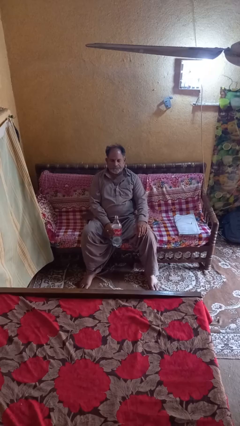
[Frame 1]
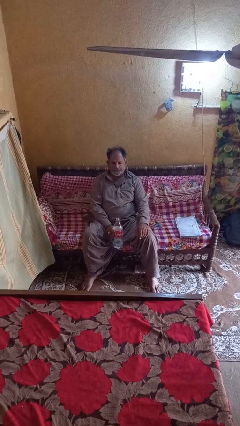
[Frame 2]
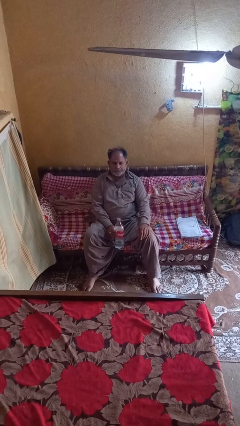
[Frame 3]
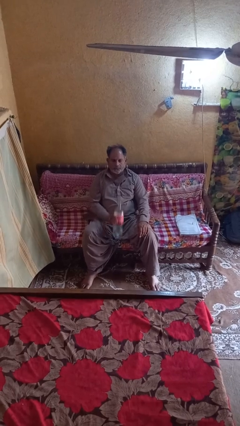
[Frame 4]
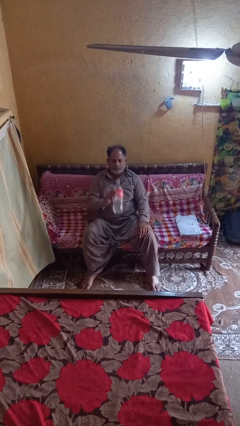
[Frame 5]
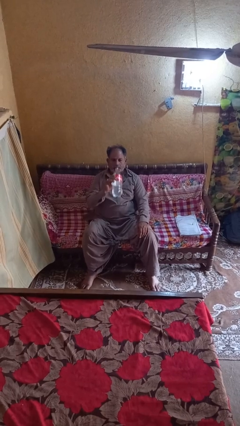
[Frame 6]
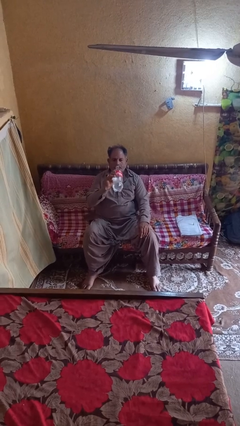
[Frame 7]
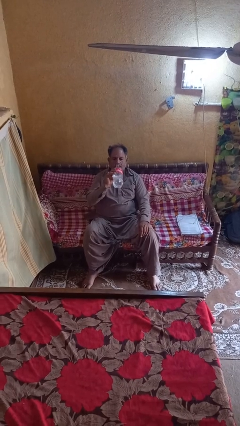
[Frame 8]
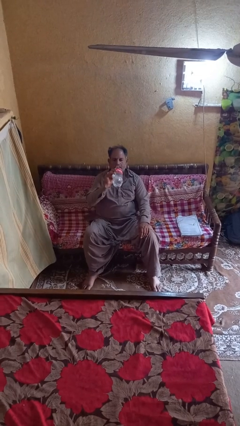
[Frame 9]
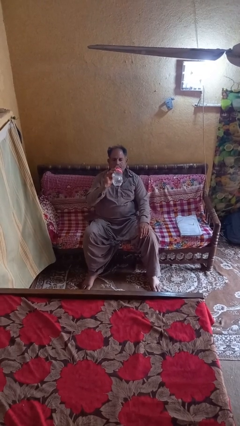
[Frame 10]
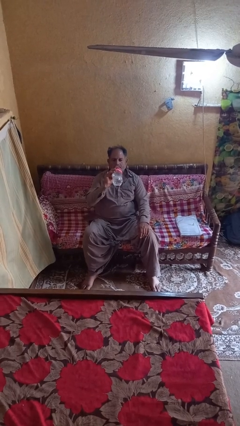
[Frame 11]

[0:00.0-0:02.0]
person drinks from bottle

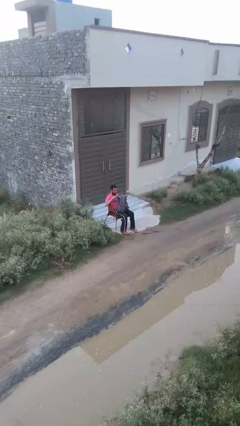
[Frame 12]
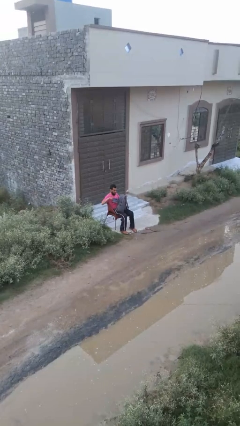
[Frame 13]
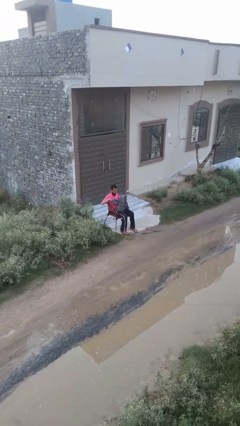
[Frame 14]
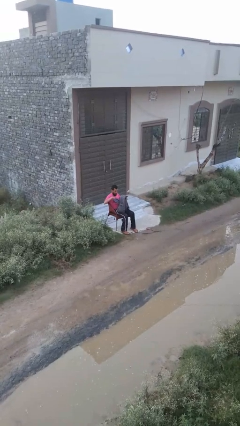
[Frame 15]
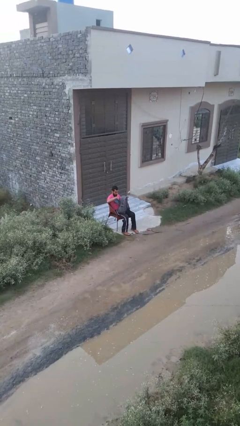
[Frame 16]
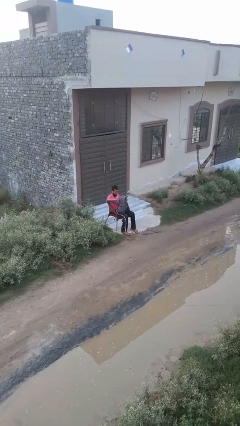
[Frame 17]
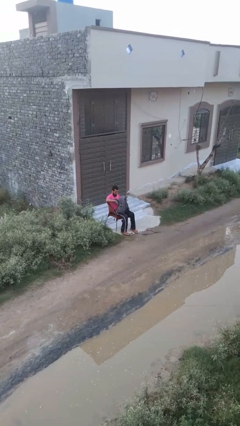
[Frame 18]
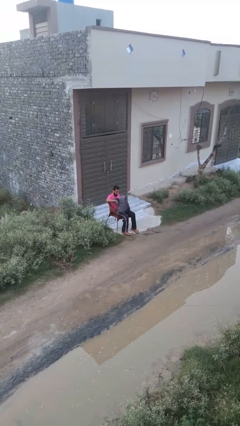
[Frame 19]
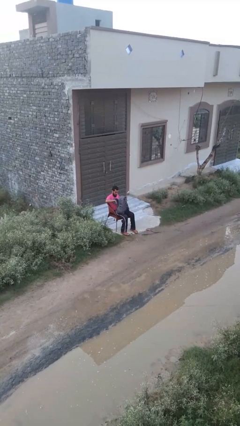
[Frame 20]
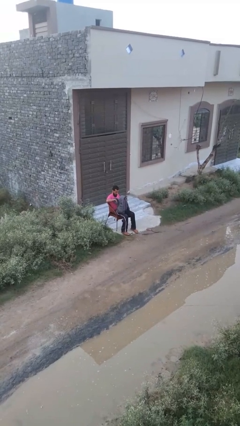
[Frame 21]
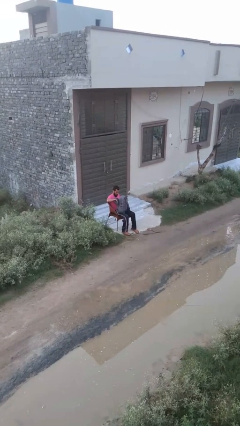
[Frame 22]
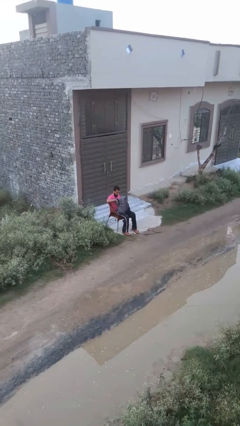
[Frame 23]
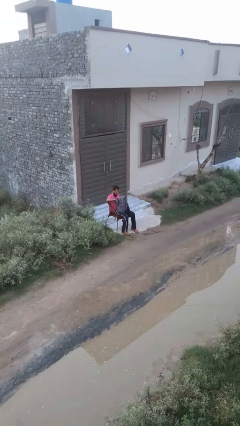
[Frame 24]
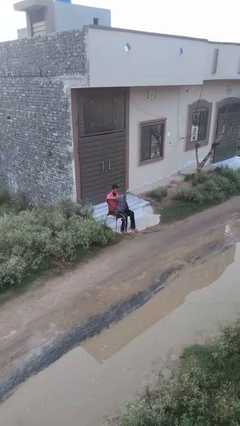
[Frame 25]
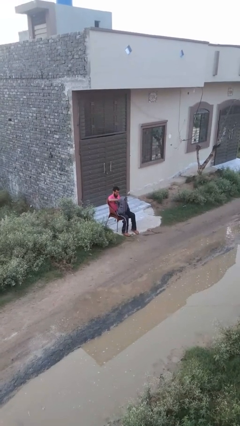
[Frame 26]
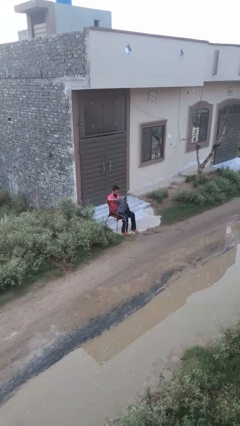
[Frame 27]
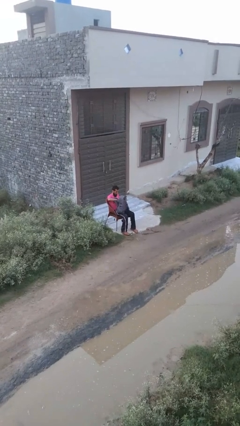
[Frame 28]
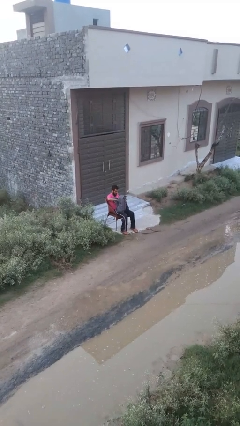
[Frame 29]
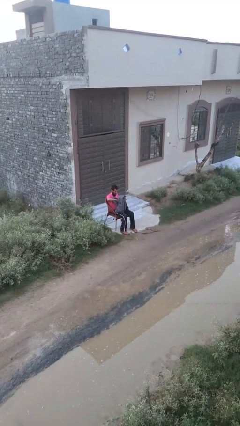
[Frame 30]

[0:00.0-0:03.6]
person searches in backpack

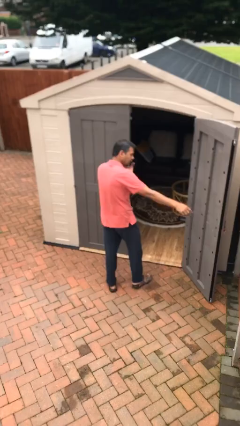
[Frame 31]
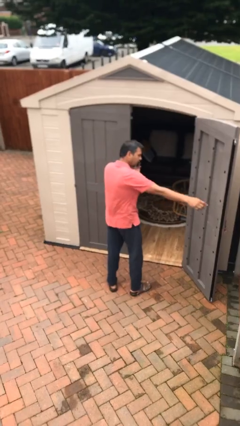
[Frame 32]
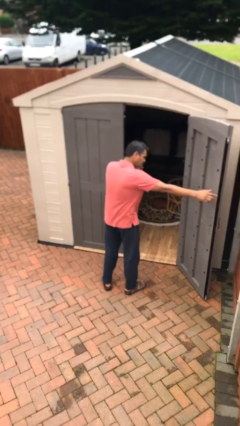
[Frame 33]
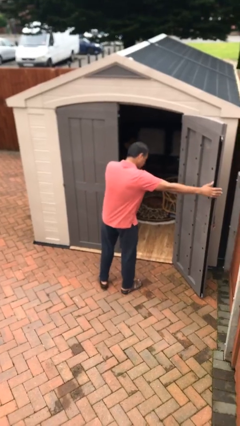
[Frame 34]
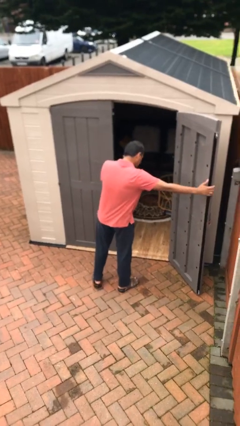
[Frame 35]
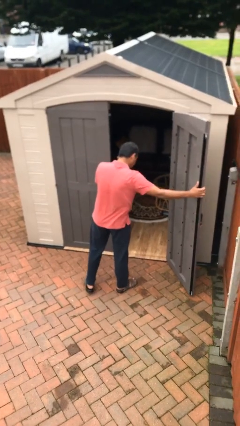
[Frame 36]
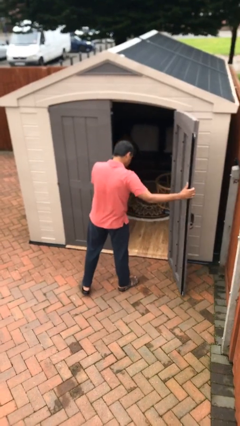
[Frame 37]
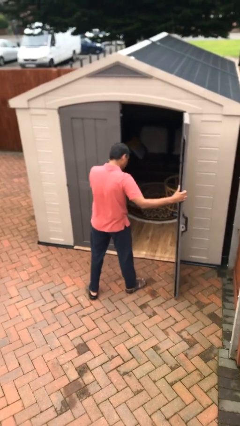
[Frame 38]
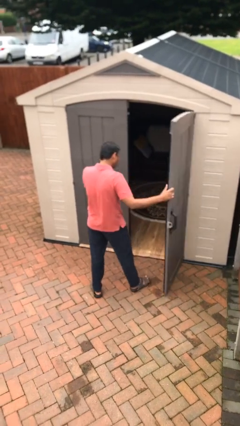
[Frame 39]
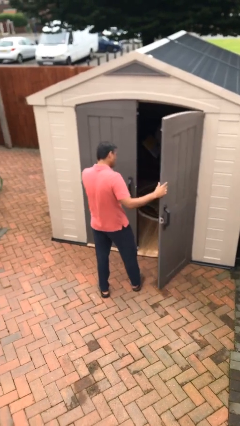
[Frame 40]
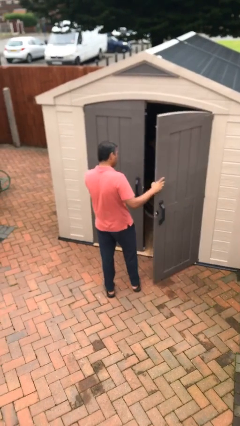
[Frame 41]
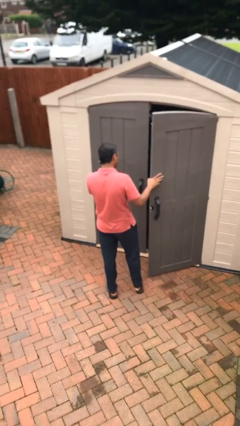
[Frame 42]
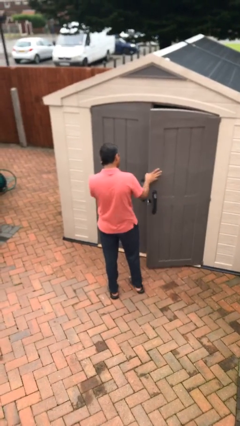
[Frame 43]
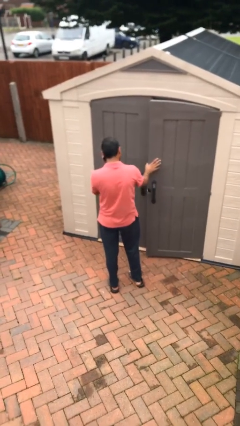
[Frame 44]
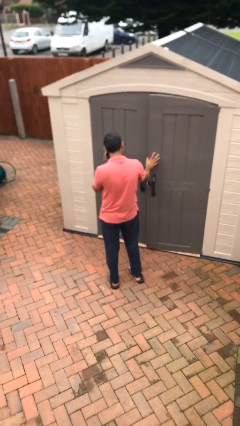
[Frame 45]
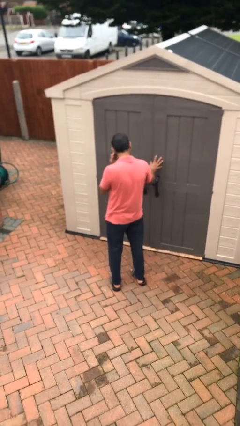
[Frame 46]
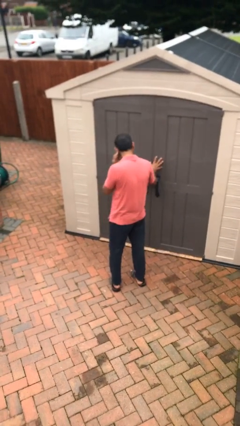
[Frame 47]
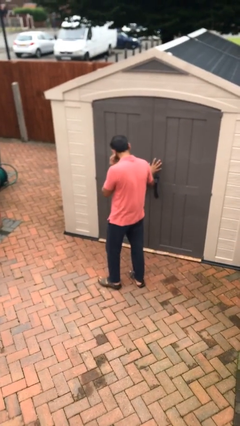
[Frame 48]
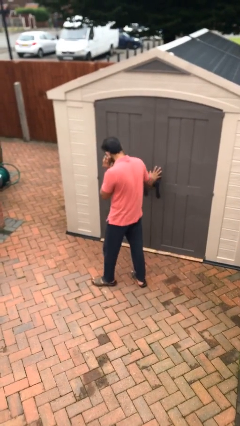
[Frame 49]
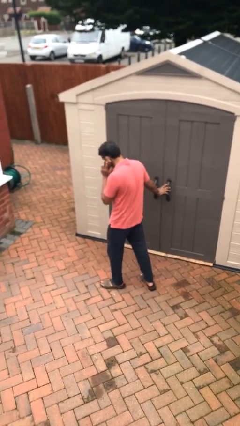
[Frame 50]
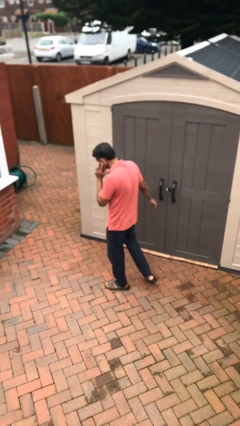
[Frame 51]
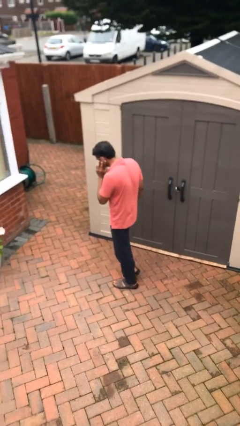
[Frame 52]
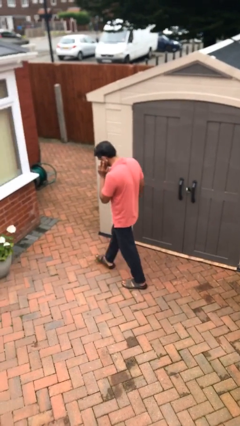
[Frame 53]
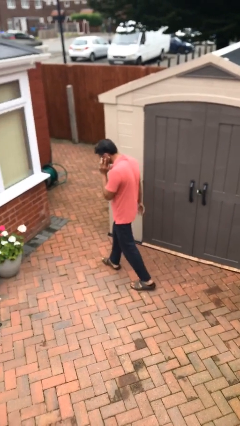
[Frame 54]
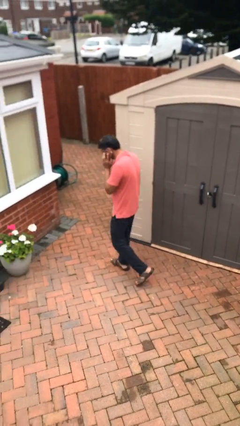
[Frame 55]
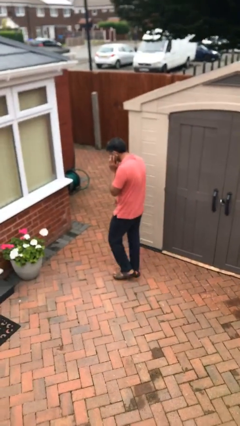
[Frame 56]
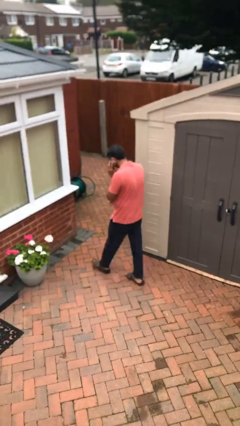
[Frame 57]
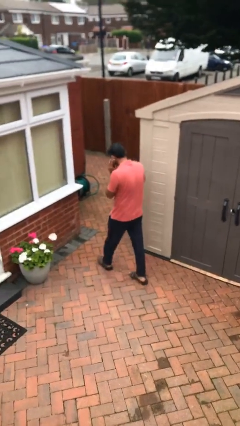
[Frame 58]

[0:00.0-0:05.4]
person closes facility door

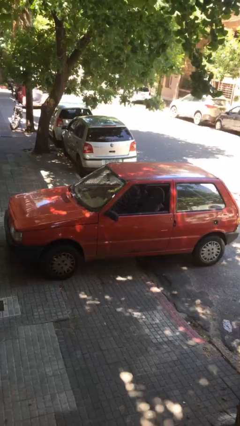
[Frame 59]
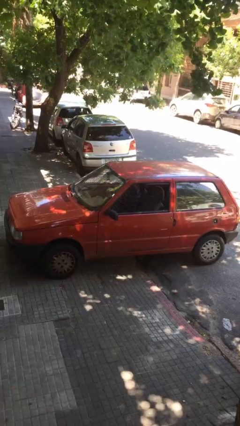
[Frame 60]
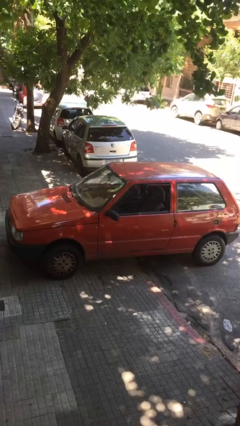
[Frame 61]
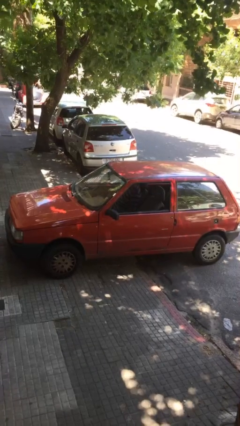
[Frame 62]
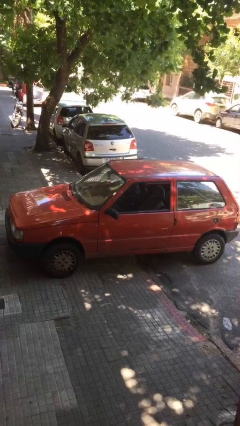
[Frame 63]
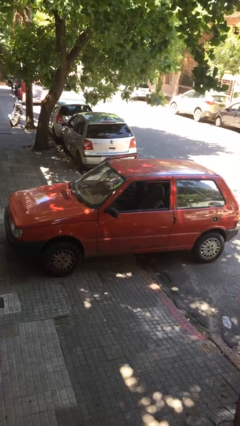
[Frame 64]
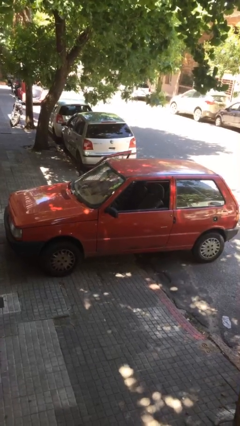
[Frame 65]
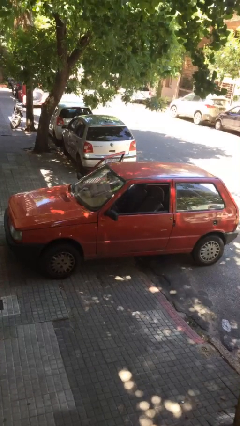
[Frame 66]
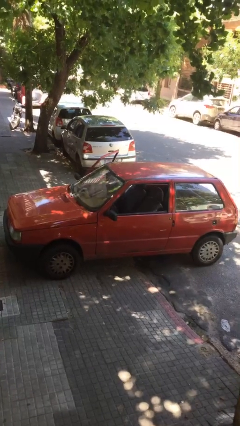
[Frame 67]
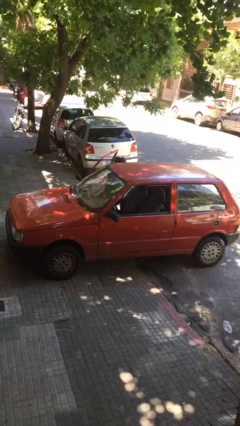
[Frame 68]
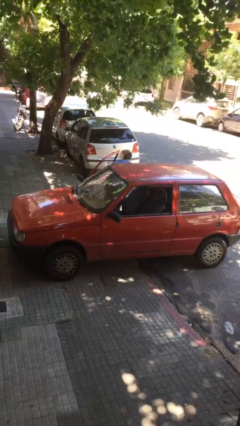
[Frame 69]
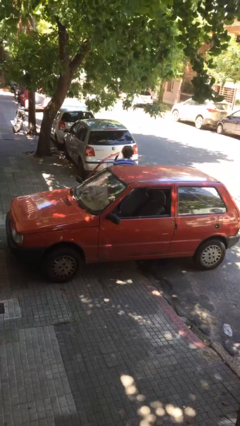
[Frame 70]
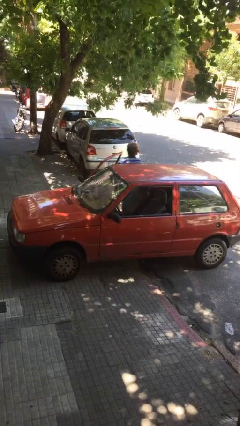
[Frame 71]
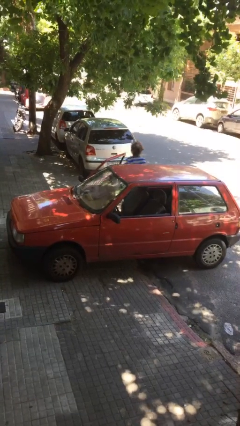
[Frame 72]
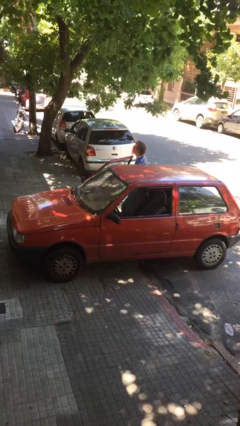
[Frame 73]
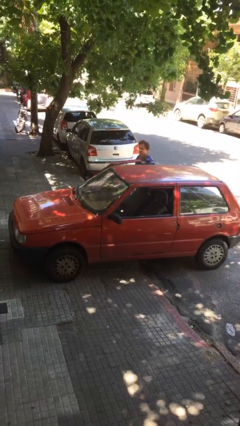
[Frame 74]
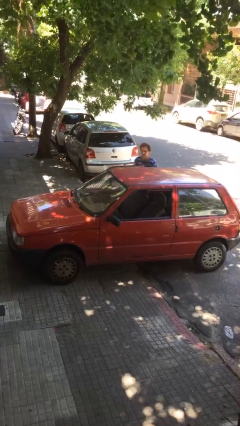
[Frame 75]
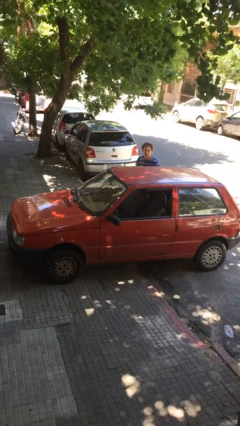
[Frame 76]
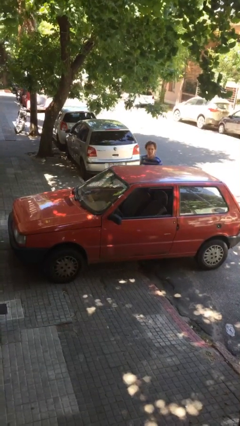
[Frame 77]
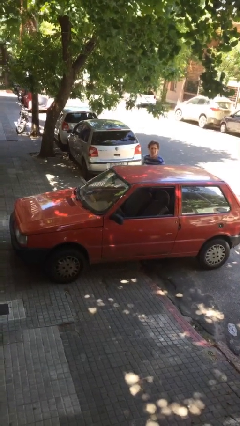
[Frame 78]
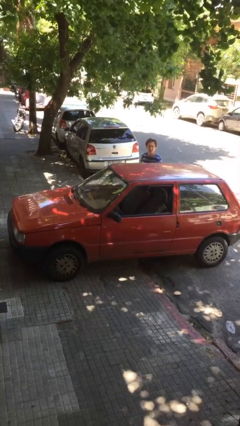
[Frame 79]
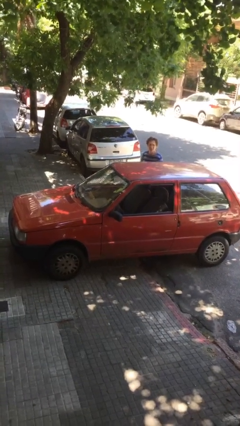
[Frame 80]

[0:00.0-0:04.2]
car drops off person

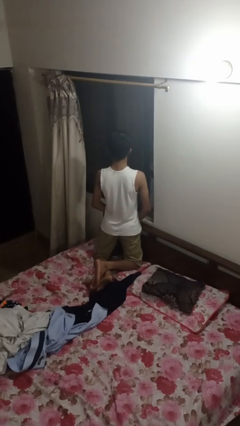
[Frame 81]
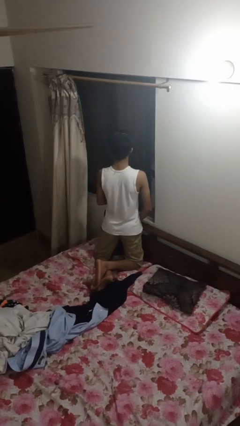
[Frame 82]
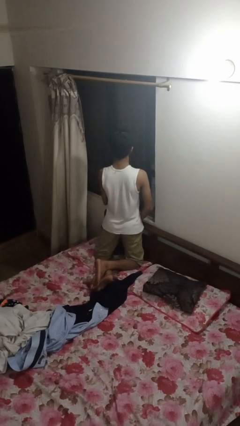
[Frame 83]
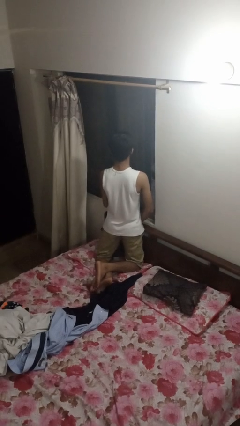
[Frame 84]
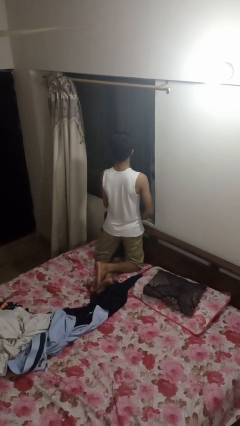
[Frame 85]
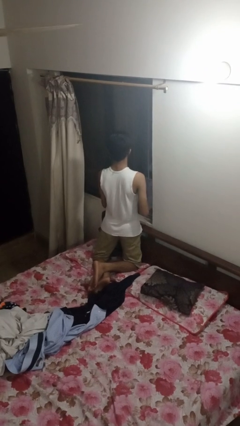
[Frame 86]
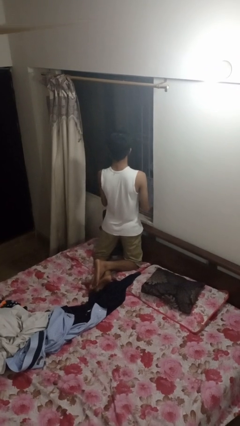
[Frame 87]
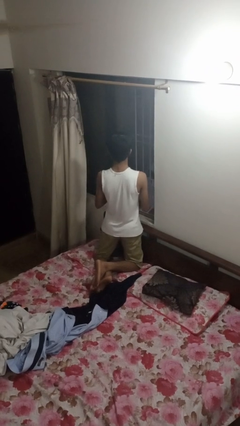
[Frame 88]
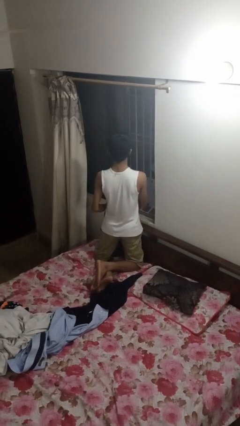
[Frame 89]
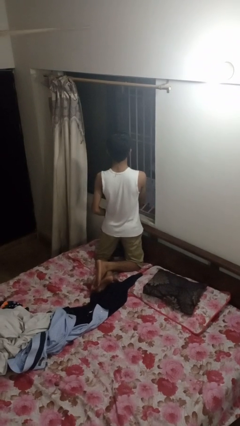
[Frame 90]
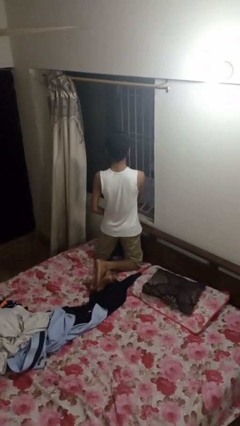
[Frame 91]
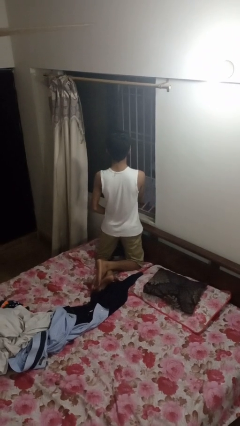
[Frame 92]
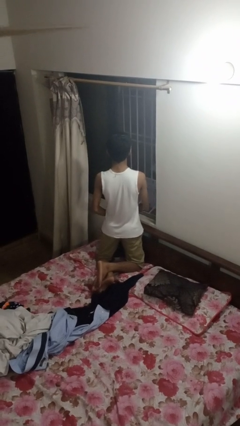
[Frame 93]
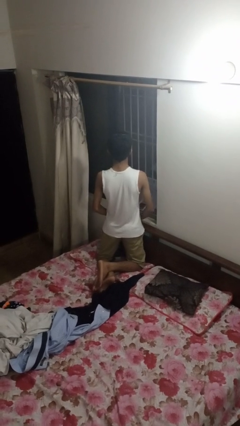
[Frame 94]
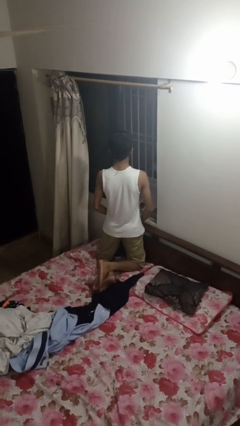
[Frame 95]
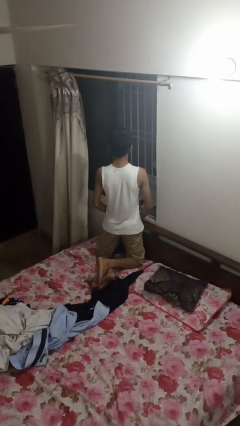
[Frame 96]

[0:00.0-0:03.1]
person opens home window
